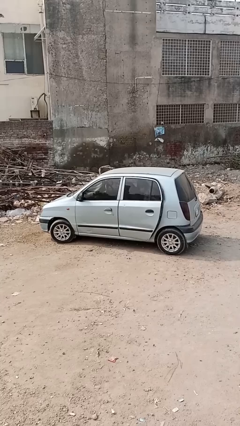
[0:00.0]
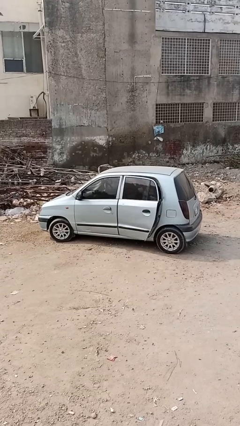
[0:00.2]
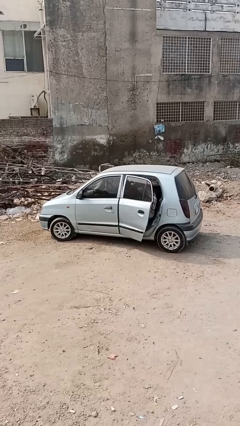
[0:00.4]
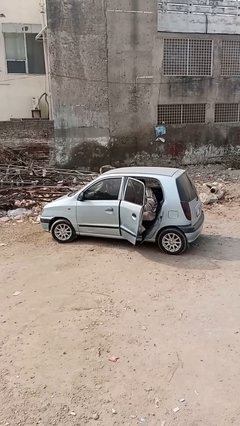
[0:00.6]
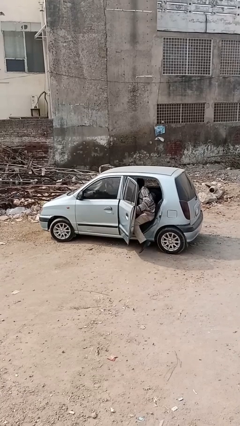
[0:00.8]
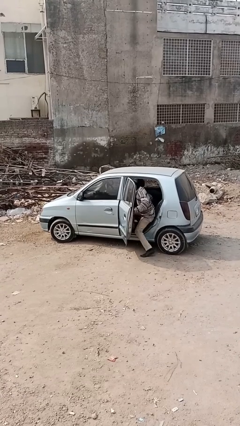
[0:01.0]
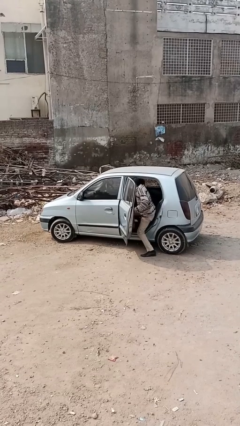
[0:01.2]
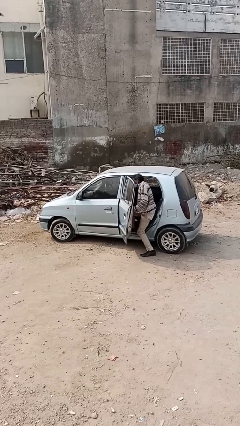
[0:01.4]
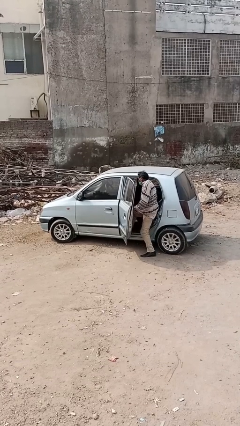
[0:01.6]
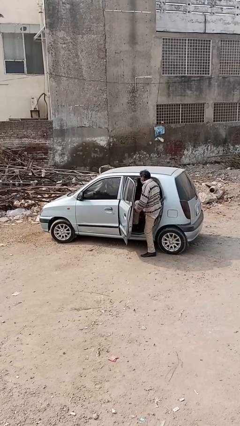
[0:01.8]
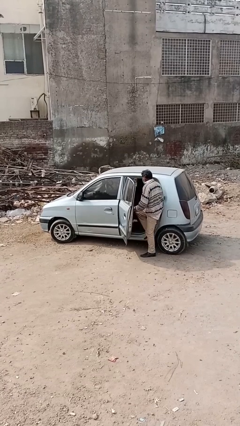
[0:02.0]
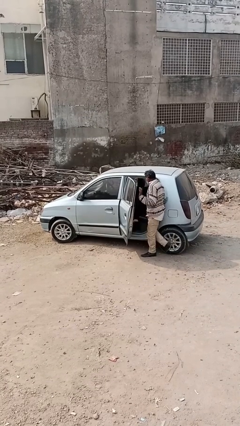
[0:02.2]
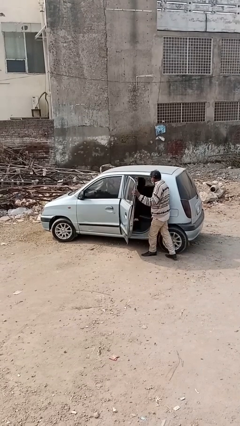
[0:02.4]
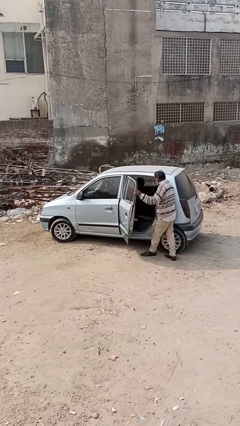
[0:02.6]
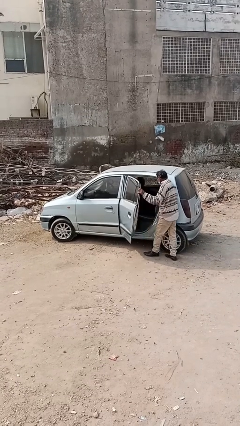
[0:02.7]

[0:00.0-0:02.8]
car drops off person

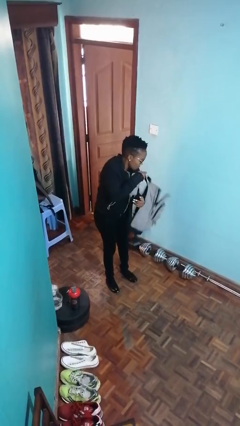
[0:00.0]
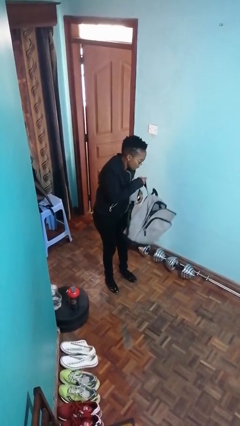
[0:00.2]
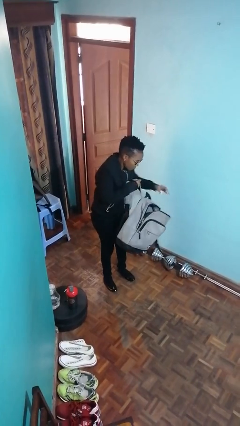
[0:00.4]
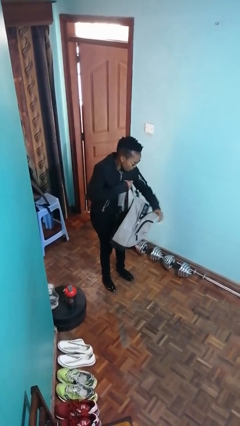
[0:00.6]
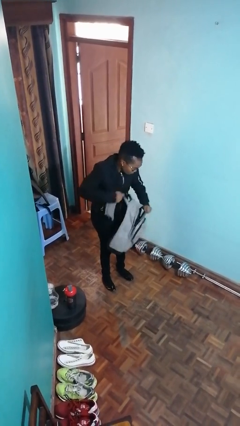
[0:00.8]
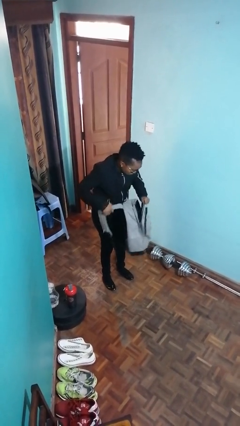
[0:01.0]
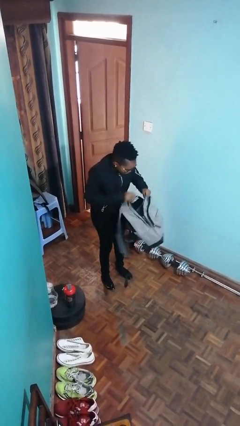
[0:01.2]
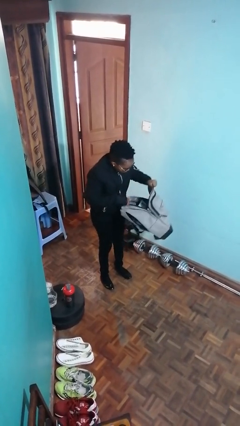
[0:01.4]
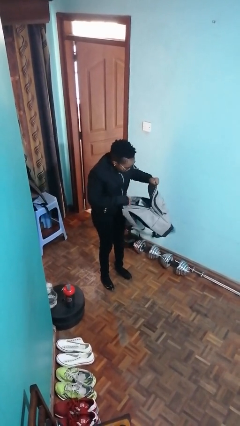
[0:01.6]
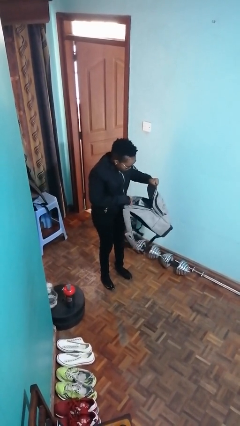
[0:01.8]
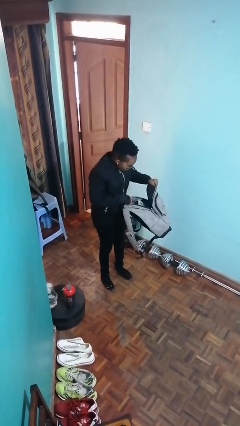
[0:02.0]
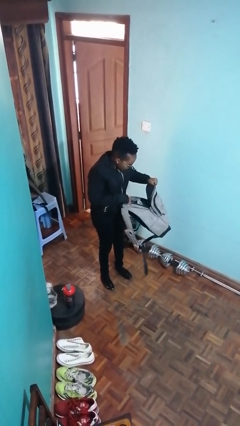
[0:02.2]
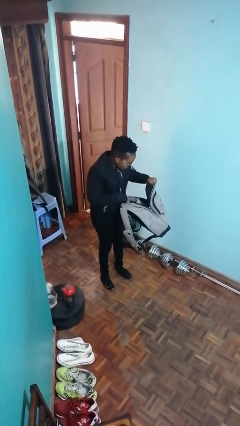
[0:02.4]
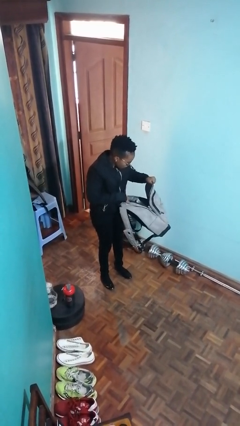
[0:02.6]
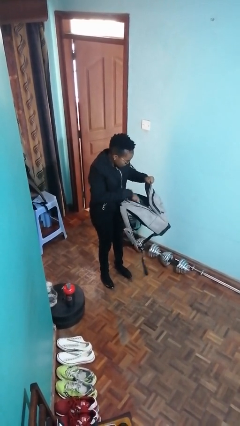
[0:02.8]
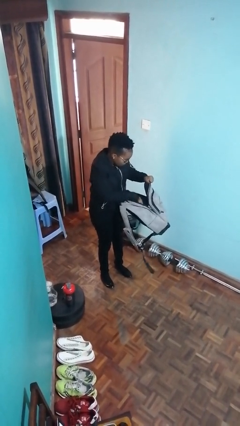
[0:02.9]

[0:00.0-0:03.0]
person searches in backpack

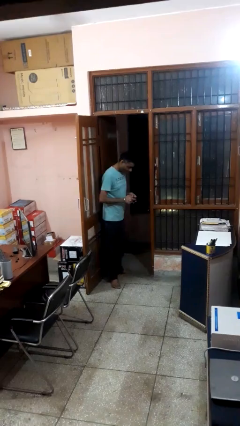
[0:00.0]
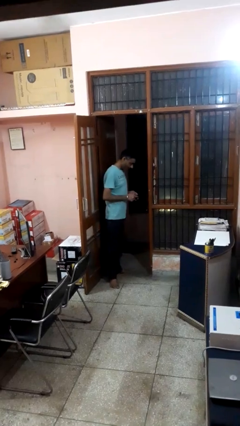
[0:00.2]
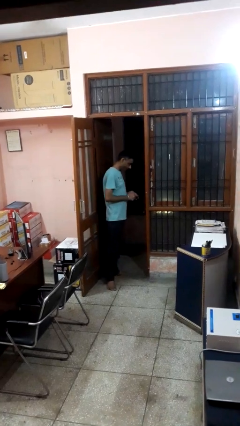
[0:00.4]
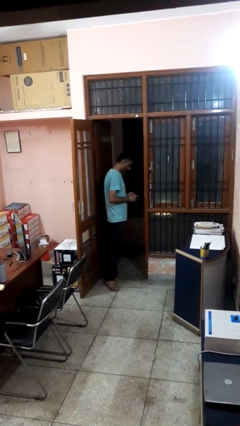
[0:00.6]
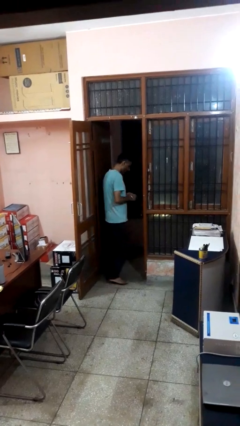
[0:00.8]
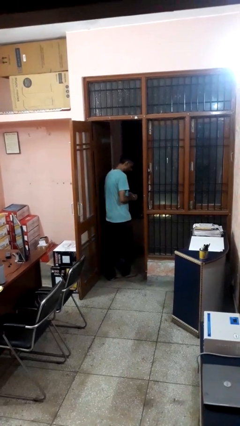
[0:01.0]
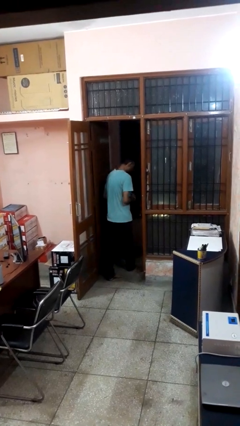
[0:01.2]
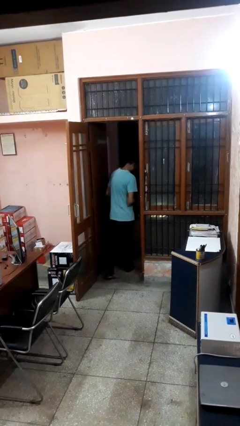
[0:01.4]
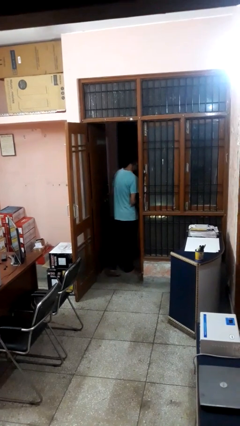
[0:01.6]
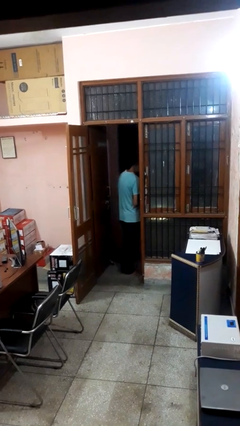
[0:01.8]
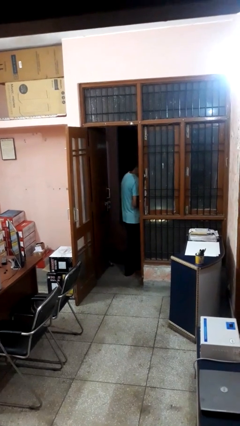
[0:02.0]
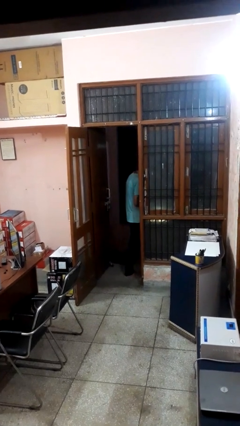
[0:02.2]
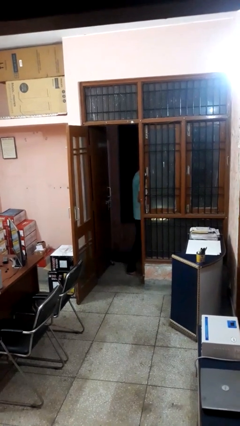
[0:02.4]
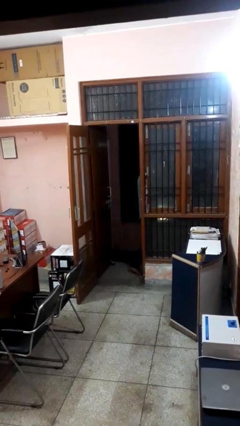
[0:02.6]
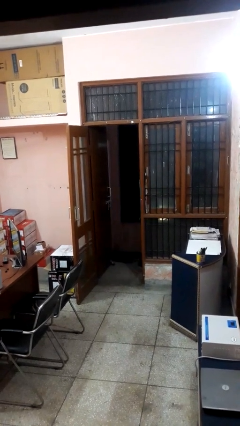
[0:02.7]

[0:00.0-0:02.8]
person exits scene through structure

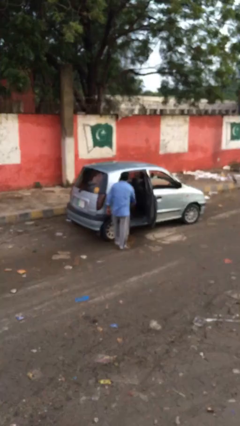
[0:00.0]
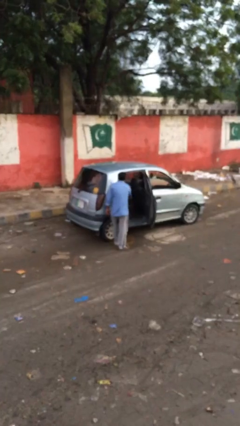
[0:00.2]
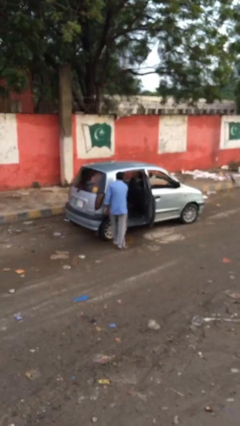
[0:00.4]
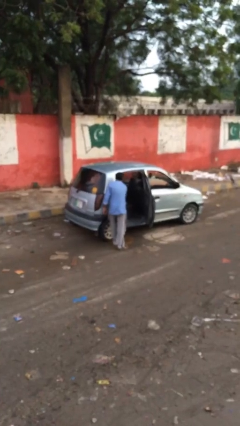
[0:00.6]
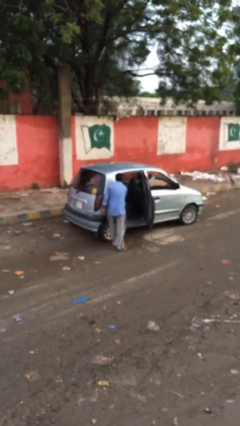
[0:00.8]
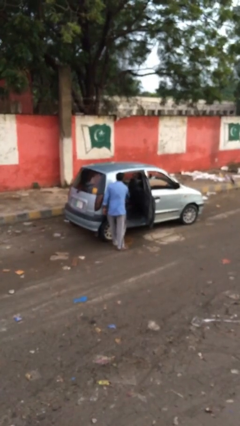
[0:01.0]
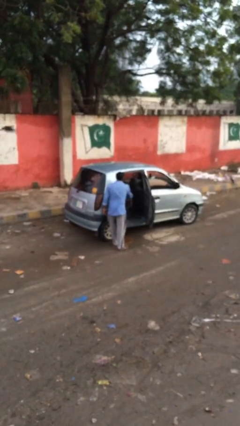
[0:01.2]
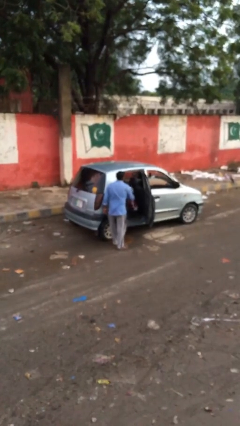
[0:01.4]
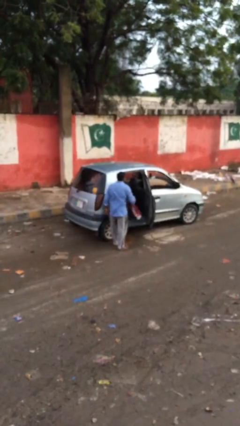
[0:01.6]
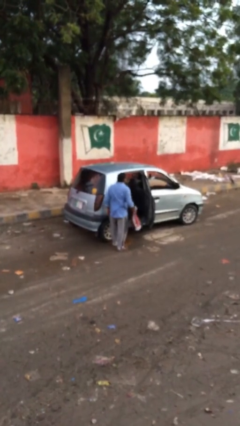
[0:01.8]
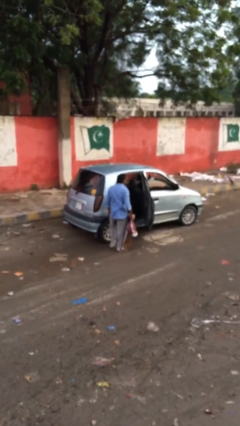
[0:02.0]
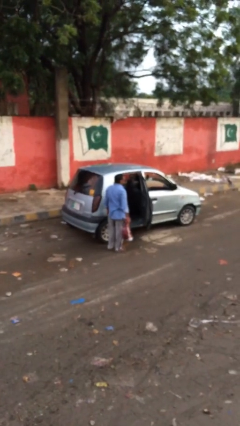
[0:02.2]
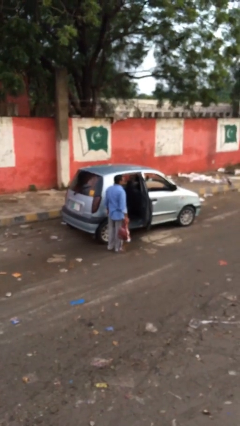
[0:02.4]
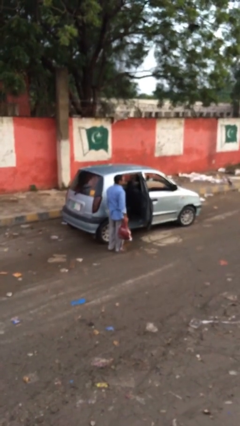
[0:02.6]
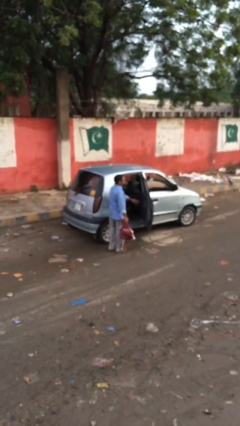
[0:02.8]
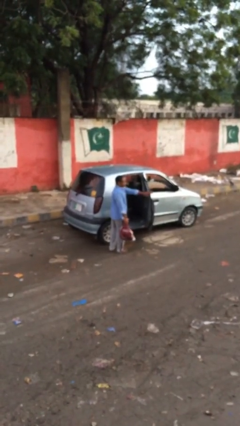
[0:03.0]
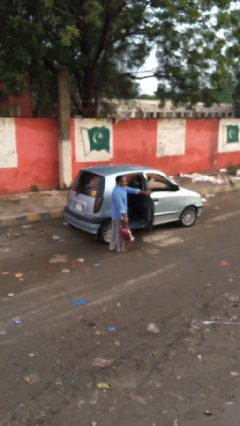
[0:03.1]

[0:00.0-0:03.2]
person unloads car

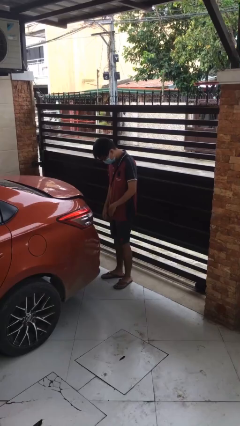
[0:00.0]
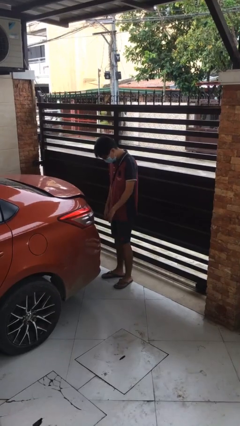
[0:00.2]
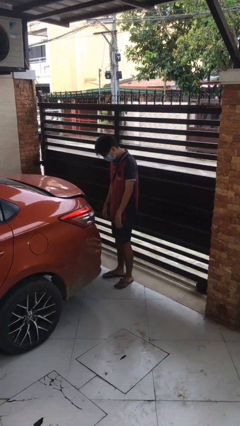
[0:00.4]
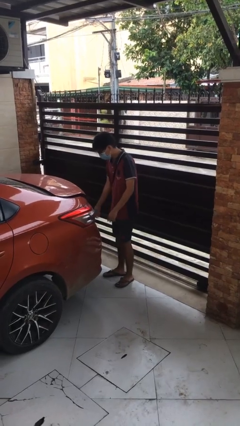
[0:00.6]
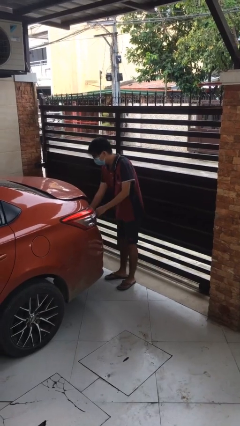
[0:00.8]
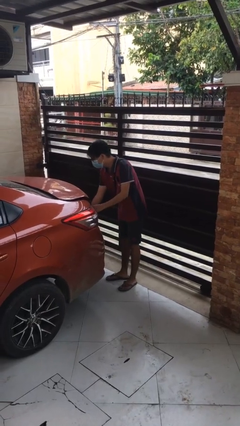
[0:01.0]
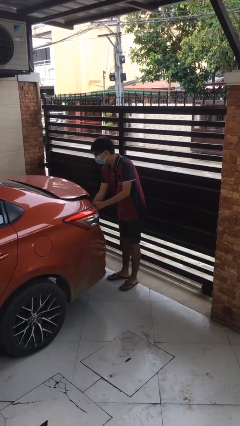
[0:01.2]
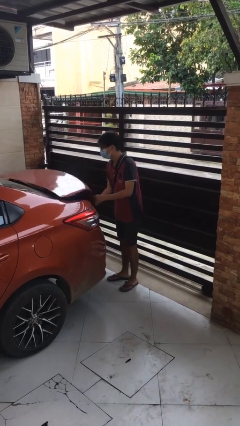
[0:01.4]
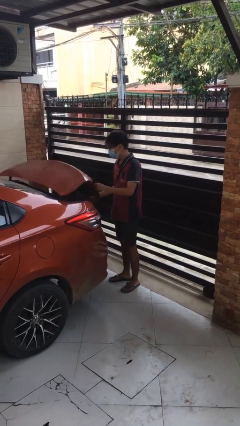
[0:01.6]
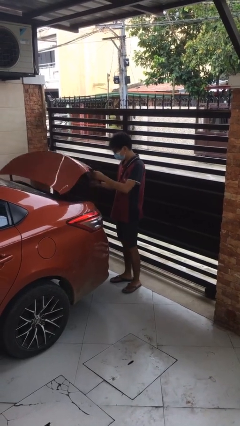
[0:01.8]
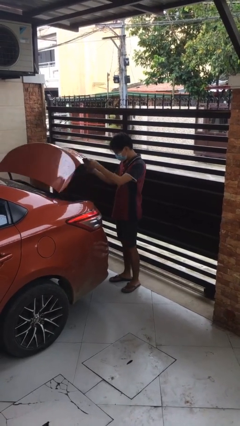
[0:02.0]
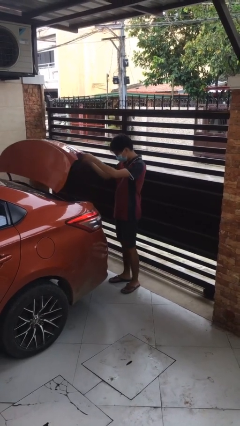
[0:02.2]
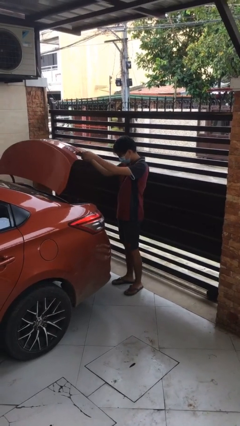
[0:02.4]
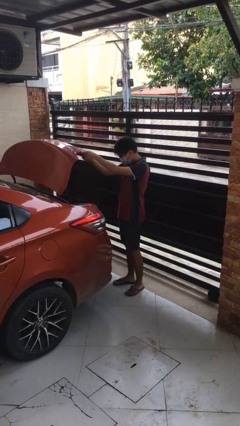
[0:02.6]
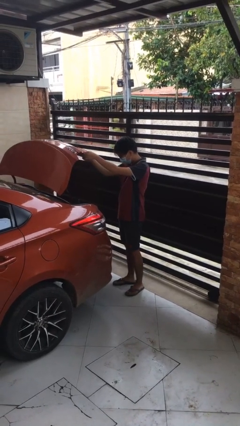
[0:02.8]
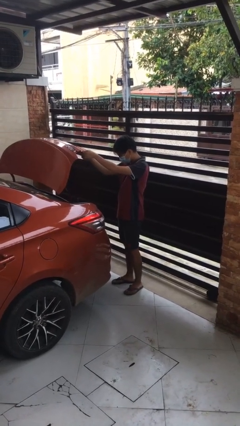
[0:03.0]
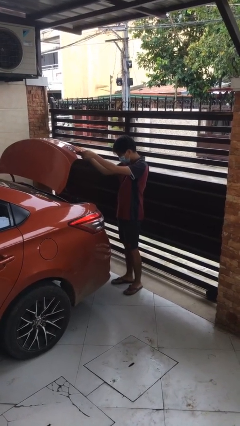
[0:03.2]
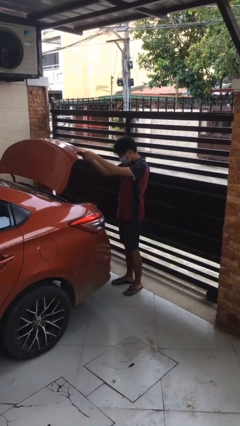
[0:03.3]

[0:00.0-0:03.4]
person opens car trunk

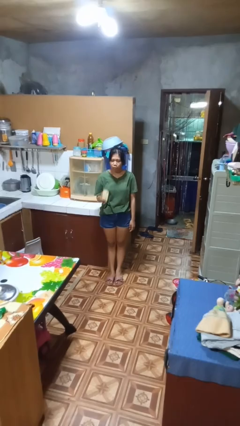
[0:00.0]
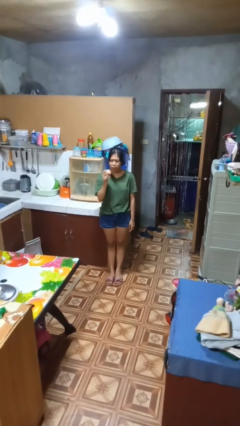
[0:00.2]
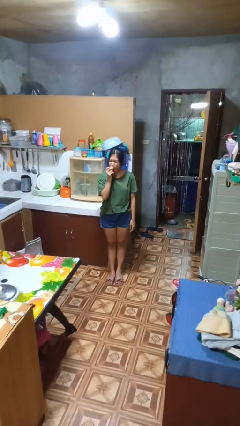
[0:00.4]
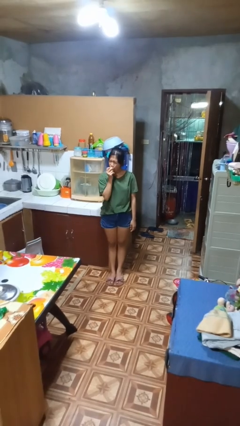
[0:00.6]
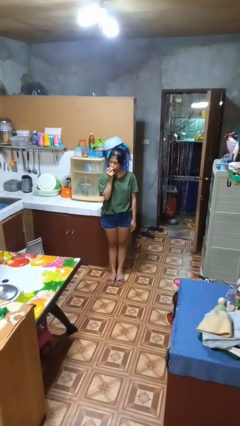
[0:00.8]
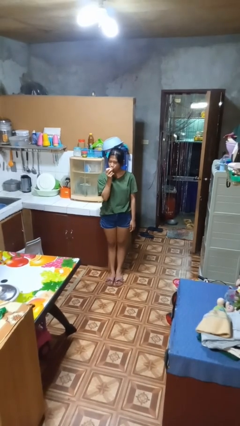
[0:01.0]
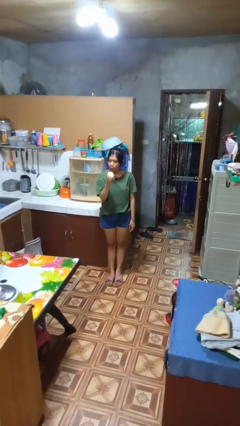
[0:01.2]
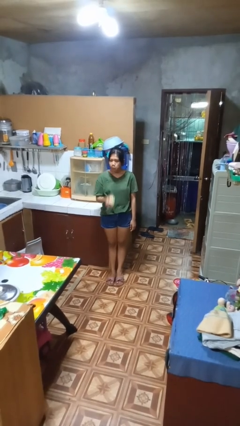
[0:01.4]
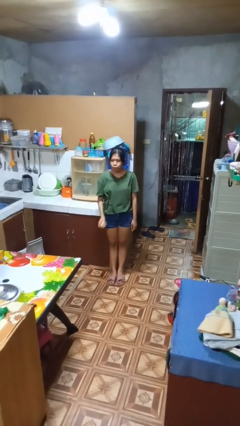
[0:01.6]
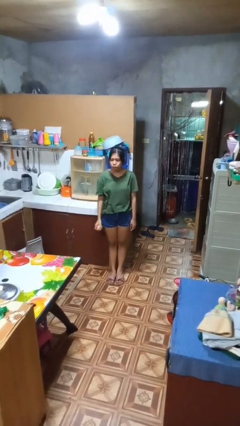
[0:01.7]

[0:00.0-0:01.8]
person eats apple

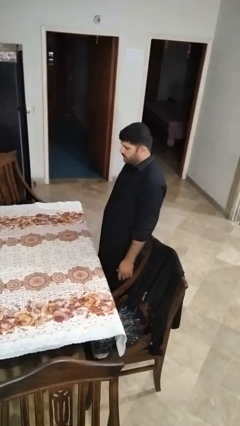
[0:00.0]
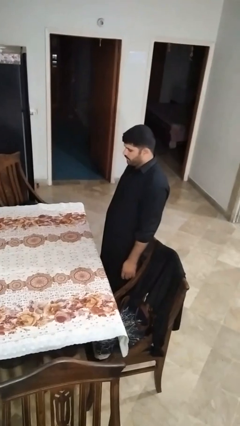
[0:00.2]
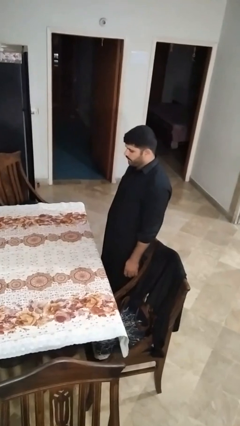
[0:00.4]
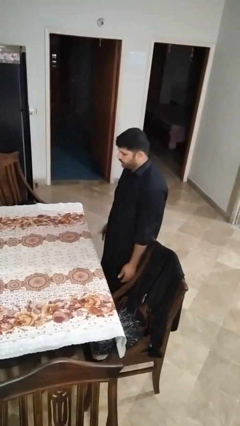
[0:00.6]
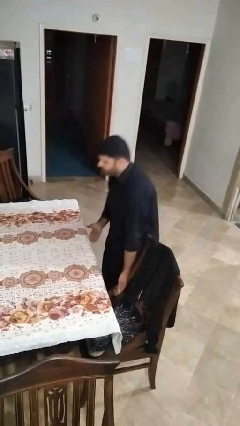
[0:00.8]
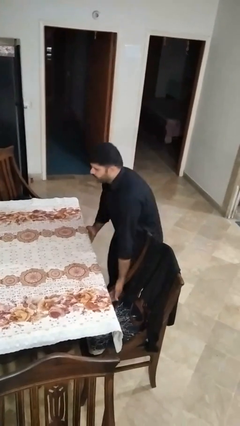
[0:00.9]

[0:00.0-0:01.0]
person folds tablecloth
